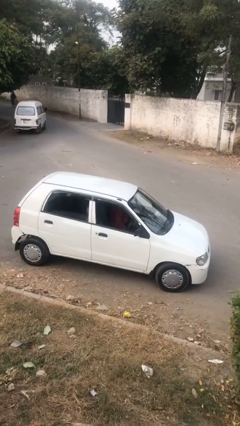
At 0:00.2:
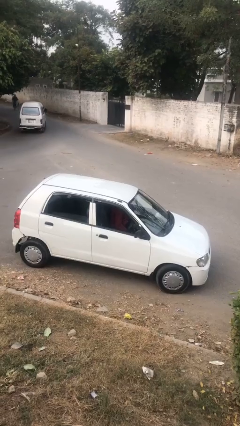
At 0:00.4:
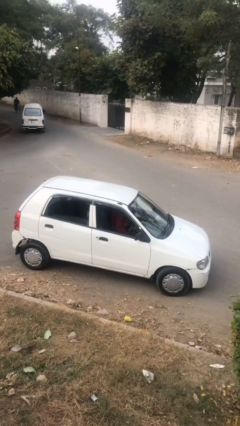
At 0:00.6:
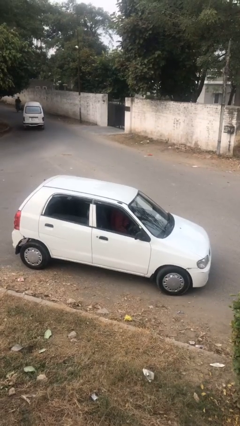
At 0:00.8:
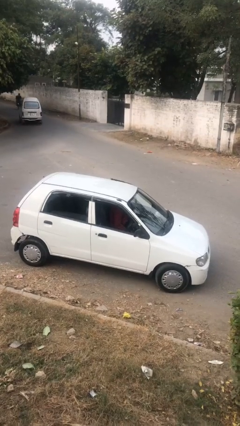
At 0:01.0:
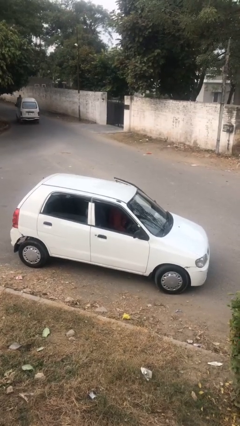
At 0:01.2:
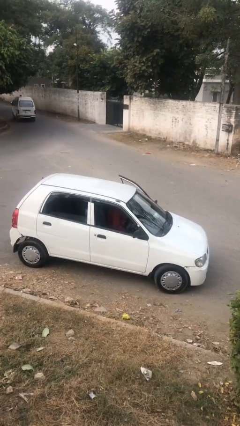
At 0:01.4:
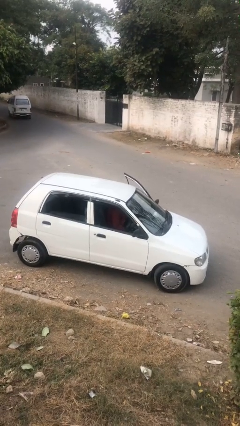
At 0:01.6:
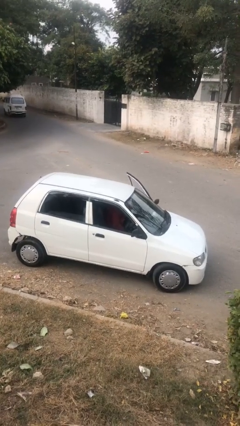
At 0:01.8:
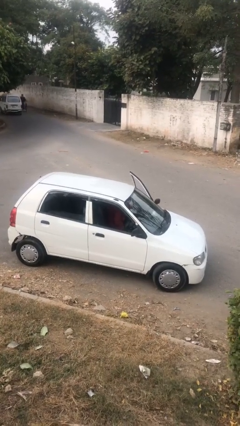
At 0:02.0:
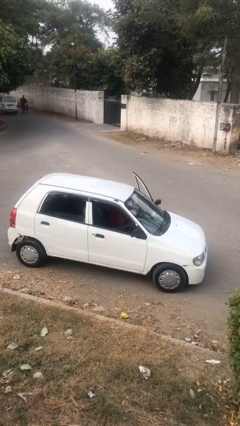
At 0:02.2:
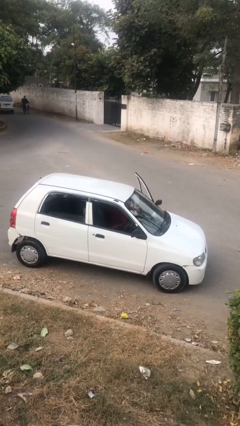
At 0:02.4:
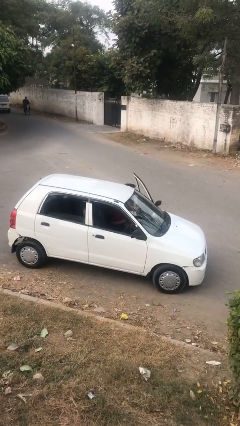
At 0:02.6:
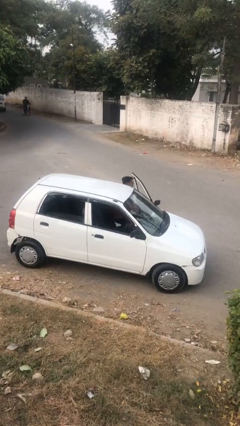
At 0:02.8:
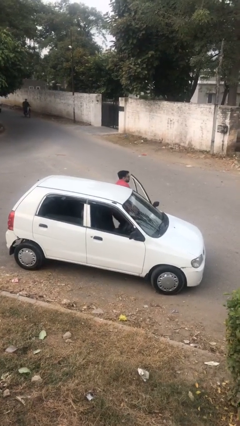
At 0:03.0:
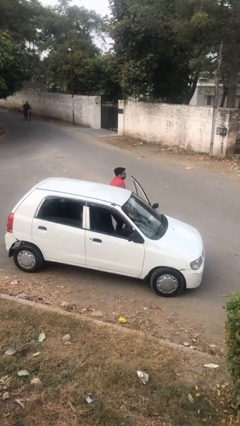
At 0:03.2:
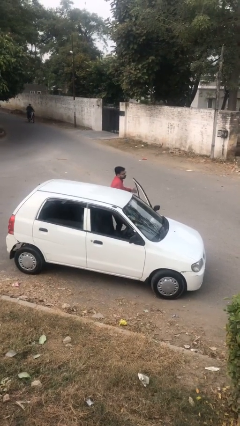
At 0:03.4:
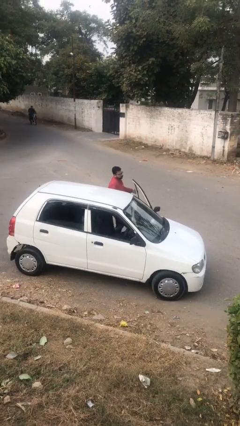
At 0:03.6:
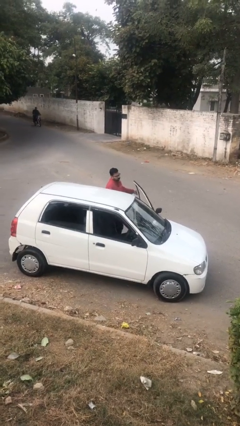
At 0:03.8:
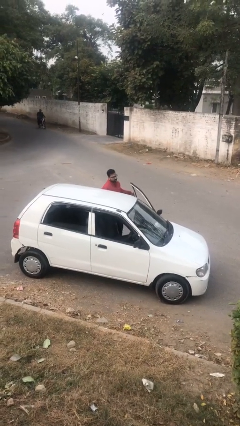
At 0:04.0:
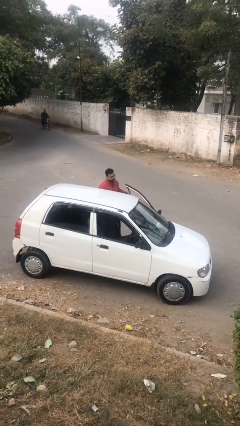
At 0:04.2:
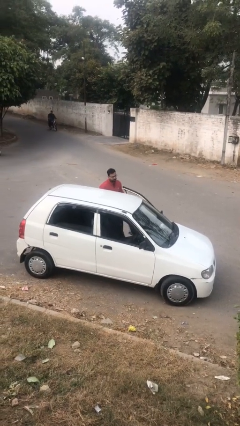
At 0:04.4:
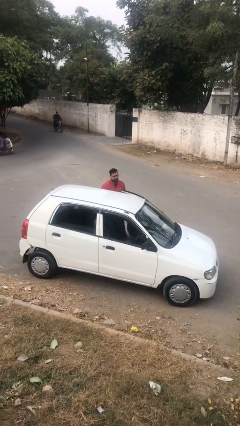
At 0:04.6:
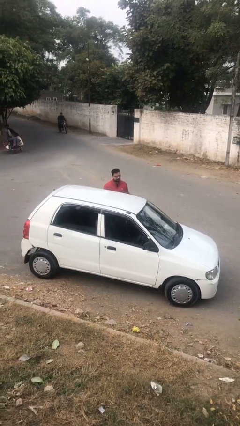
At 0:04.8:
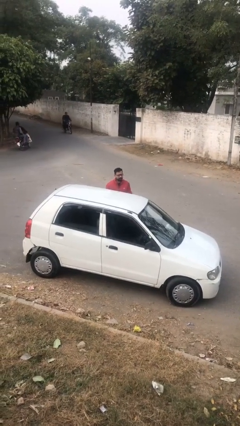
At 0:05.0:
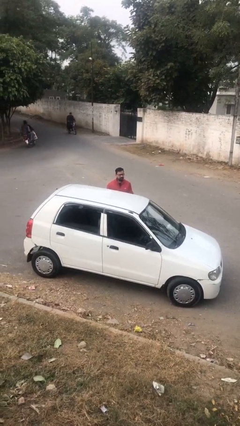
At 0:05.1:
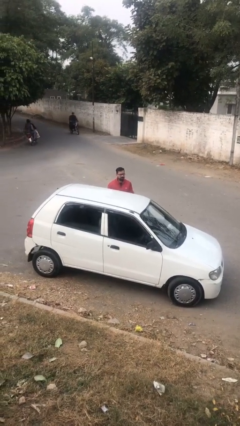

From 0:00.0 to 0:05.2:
person exits car

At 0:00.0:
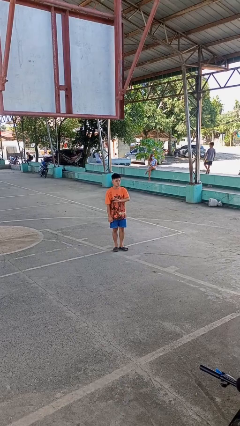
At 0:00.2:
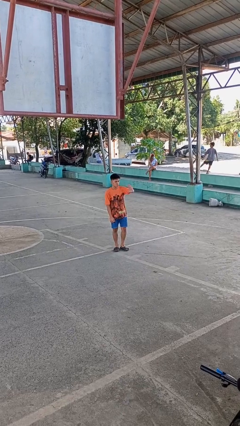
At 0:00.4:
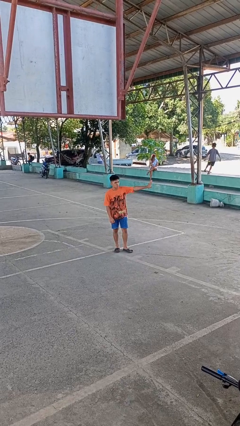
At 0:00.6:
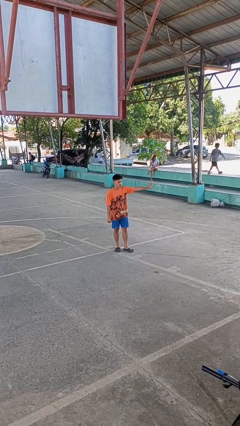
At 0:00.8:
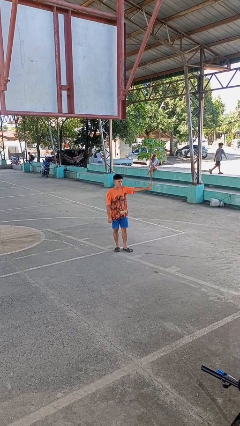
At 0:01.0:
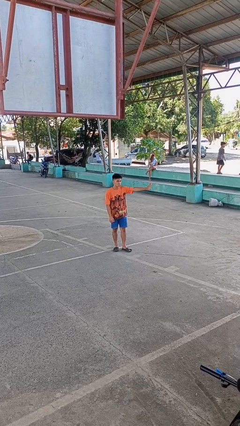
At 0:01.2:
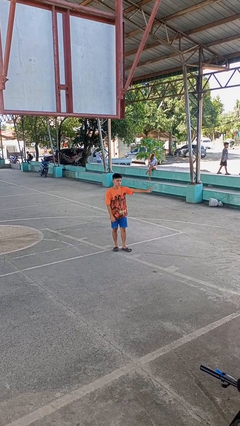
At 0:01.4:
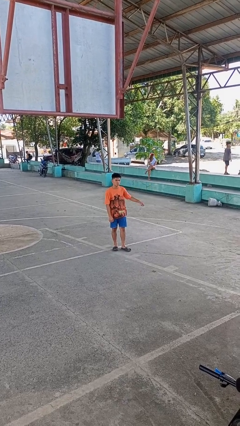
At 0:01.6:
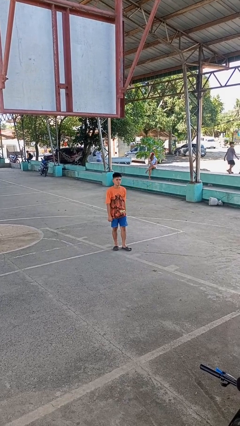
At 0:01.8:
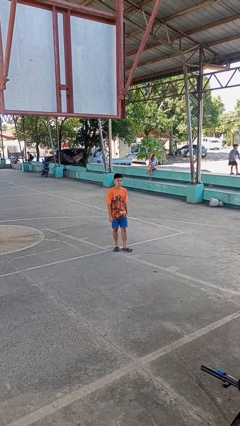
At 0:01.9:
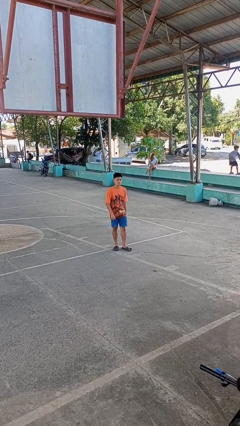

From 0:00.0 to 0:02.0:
person gestures swipe left

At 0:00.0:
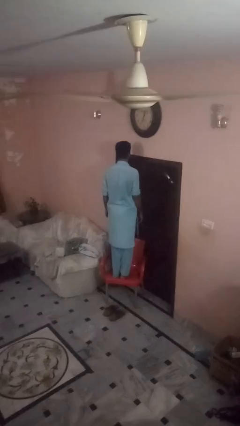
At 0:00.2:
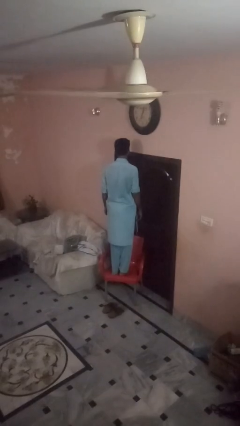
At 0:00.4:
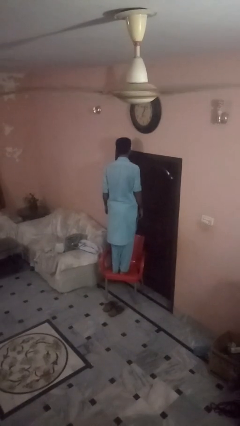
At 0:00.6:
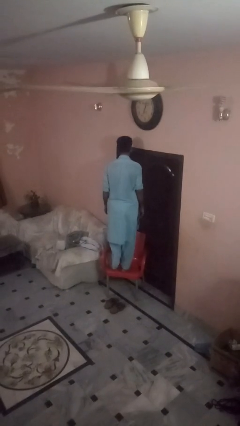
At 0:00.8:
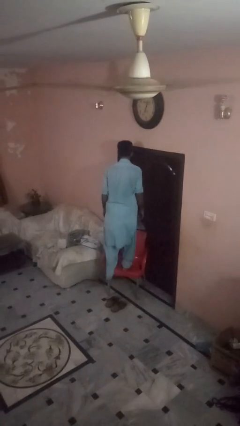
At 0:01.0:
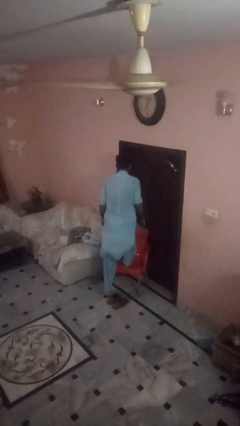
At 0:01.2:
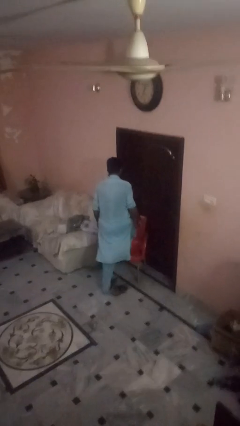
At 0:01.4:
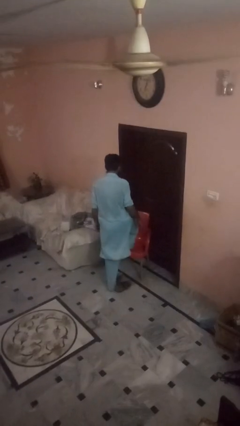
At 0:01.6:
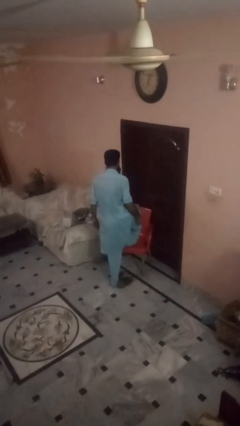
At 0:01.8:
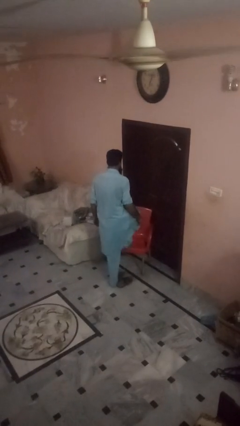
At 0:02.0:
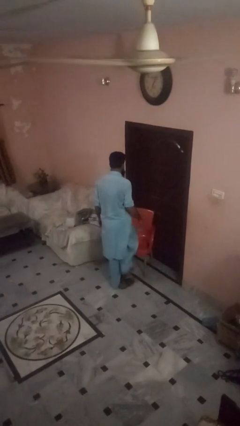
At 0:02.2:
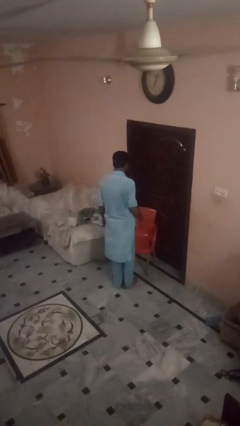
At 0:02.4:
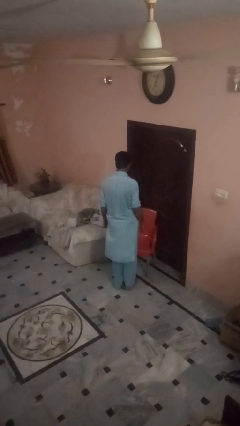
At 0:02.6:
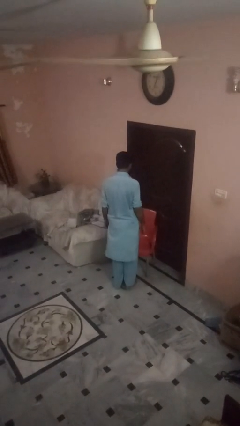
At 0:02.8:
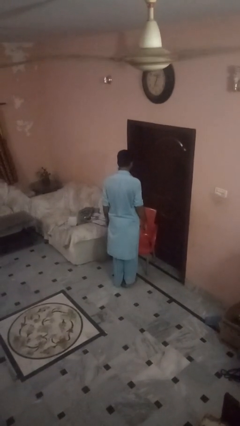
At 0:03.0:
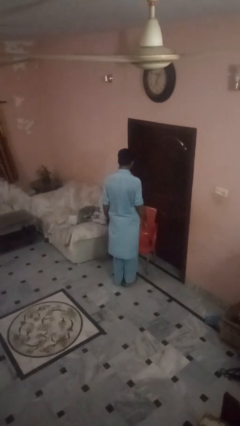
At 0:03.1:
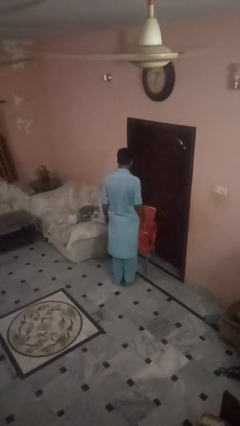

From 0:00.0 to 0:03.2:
person climbs off chair

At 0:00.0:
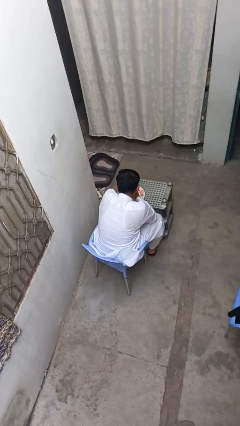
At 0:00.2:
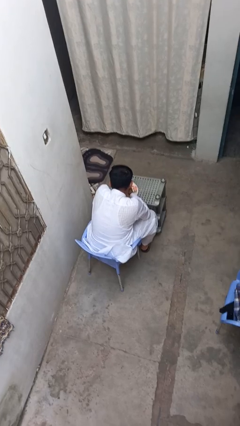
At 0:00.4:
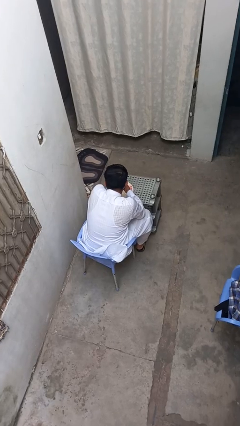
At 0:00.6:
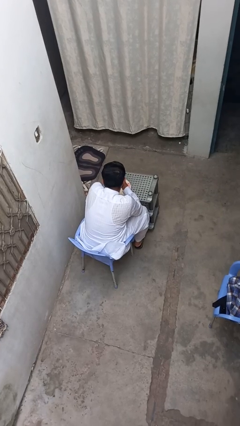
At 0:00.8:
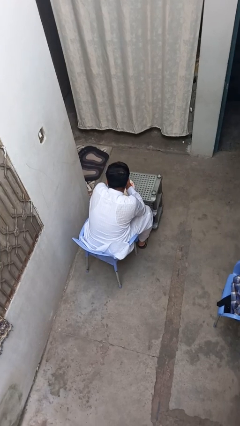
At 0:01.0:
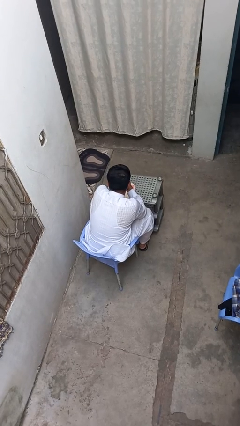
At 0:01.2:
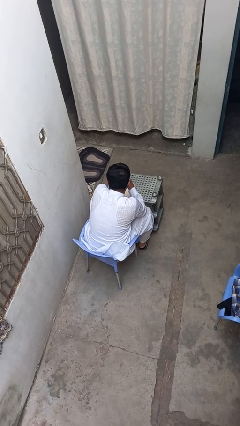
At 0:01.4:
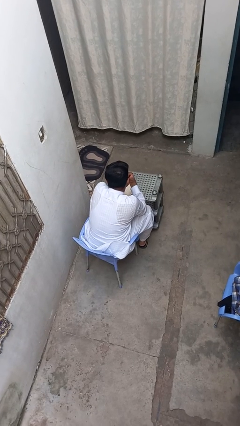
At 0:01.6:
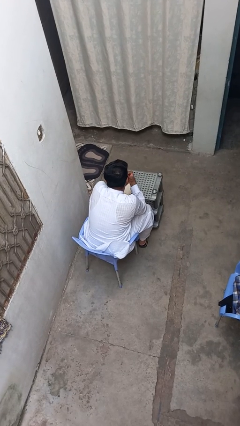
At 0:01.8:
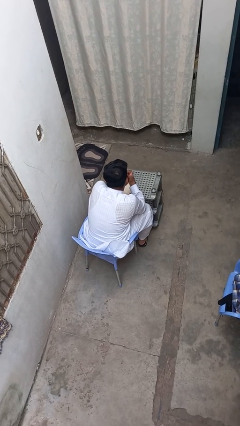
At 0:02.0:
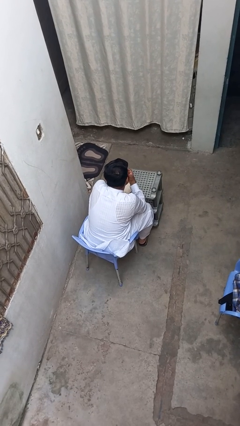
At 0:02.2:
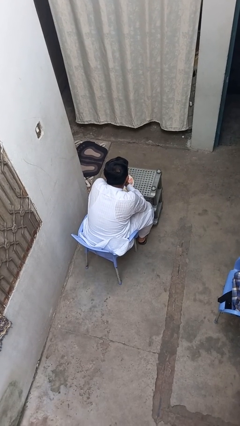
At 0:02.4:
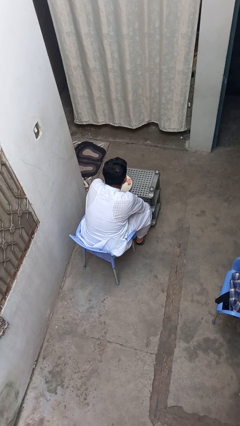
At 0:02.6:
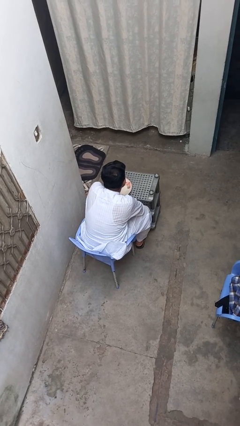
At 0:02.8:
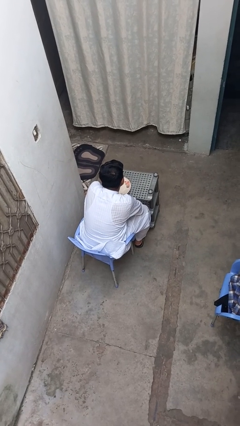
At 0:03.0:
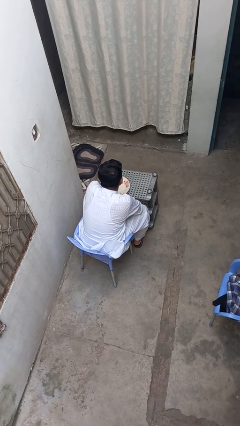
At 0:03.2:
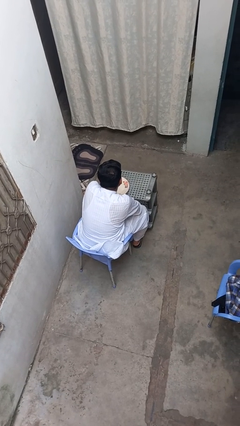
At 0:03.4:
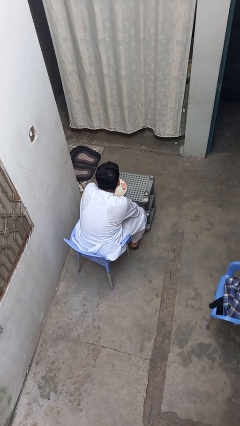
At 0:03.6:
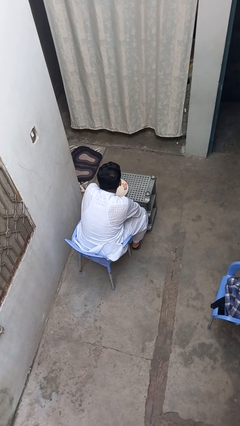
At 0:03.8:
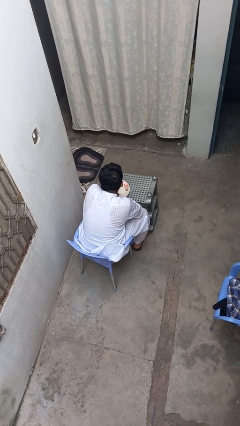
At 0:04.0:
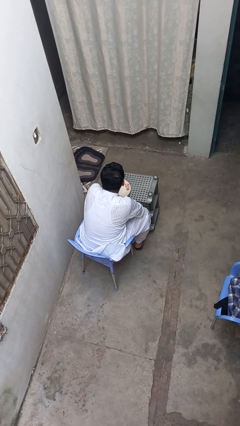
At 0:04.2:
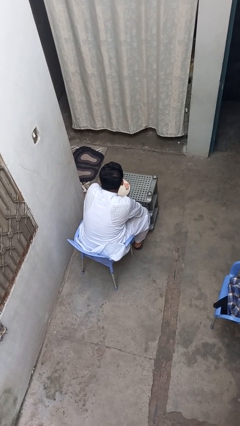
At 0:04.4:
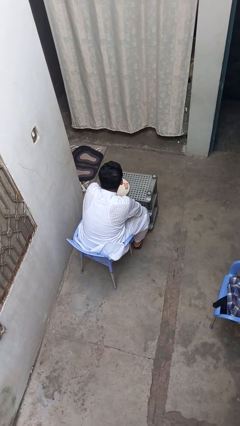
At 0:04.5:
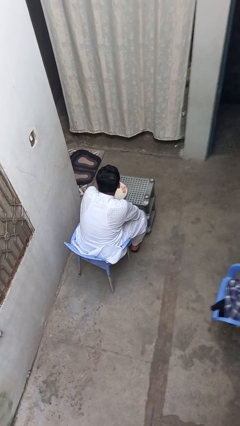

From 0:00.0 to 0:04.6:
person eats with hands

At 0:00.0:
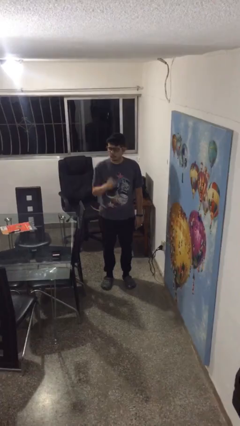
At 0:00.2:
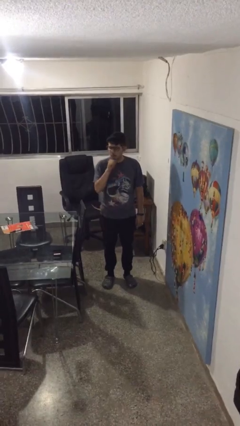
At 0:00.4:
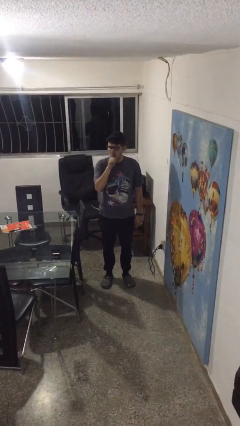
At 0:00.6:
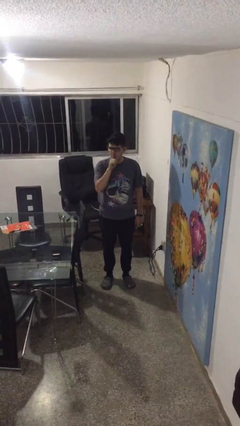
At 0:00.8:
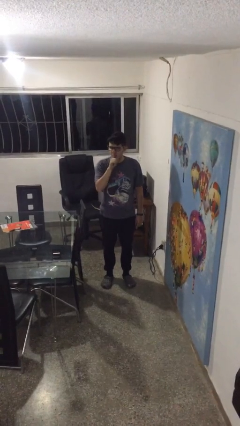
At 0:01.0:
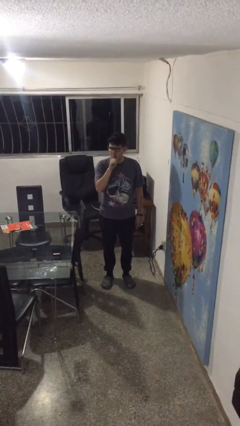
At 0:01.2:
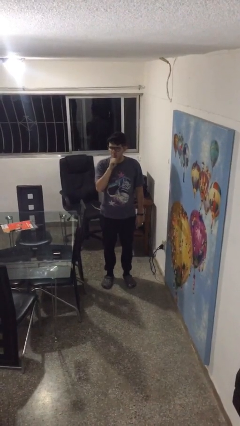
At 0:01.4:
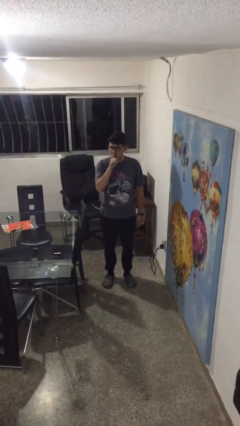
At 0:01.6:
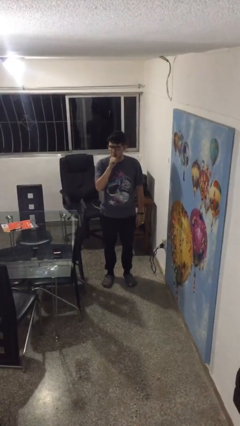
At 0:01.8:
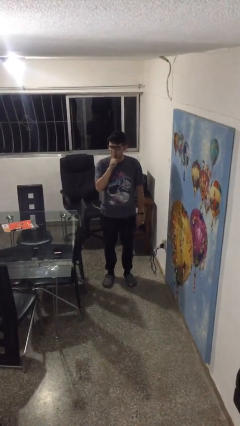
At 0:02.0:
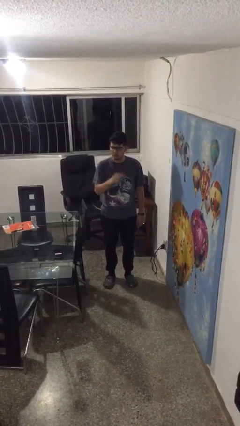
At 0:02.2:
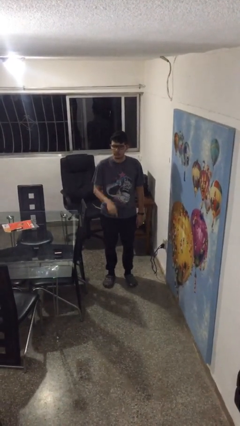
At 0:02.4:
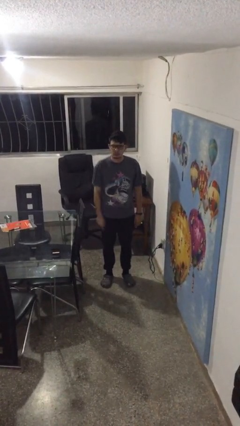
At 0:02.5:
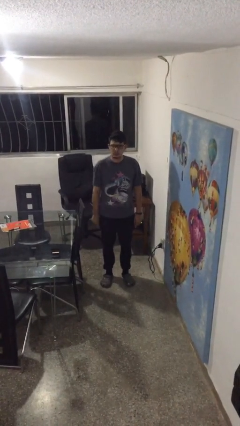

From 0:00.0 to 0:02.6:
person gestures be quiet
